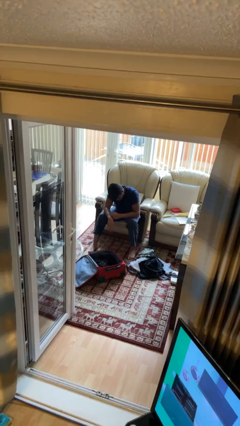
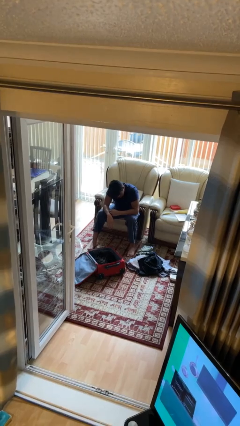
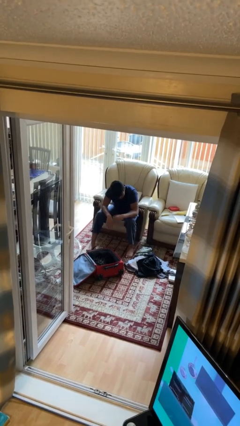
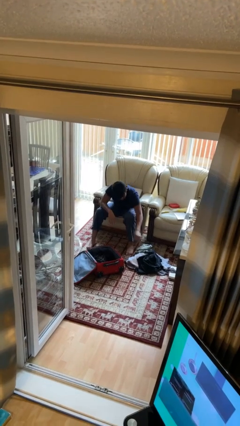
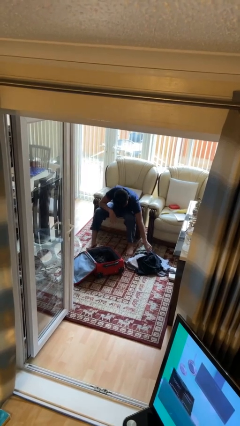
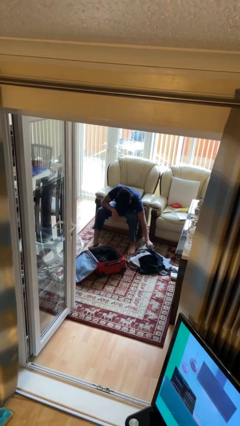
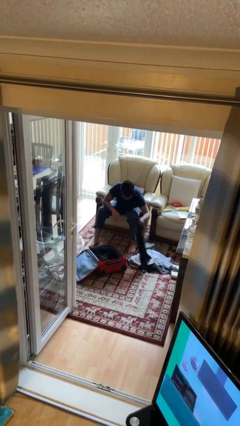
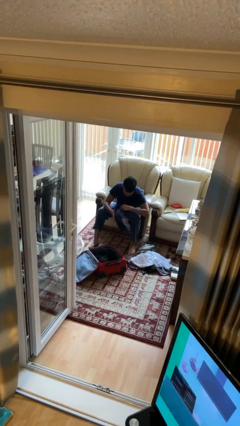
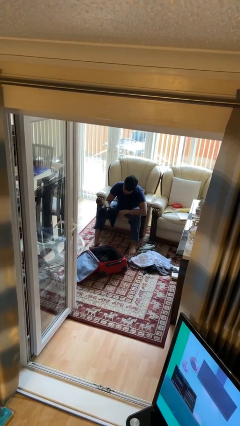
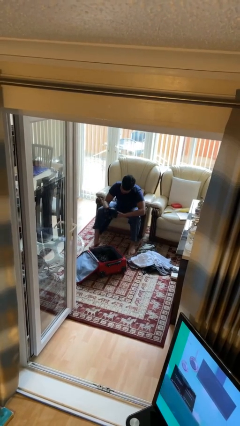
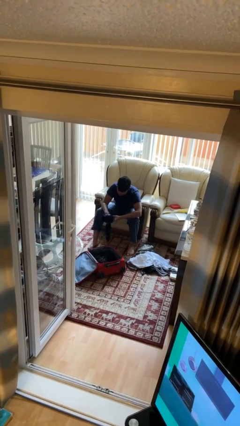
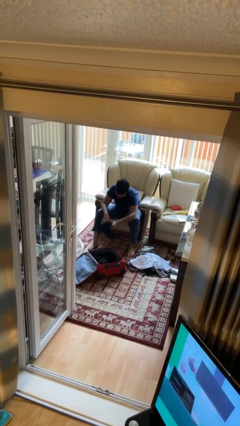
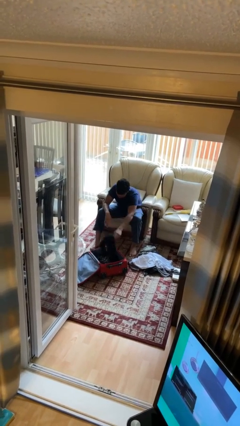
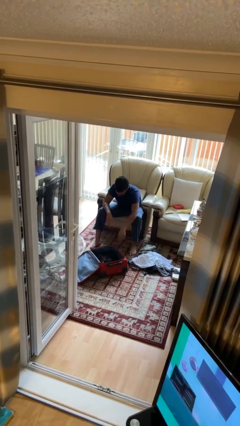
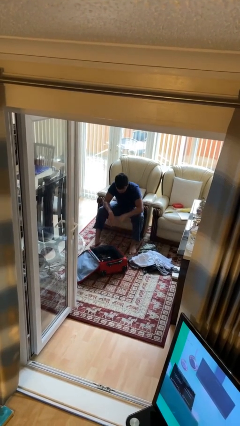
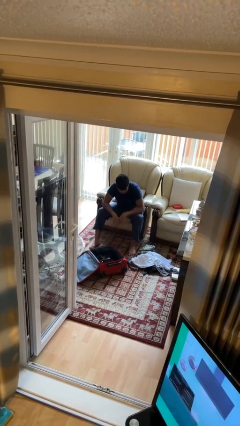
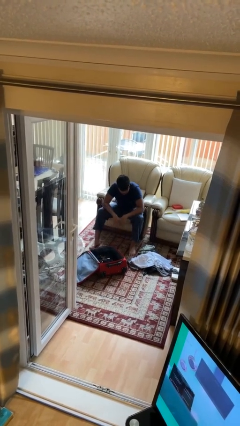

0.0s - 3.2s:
person loads clothes into suitcase

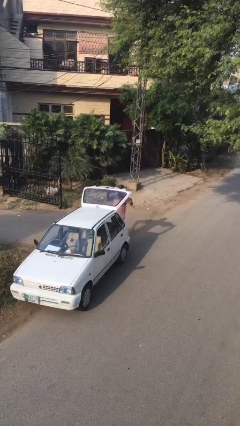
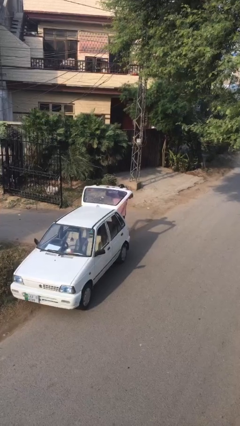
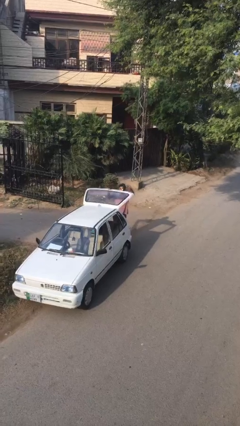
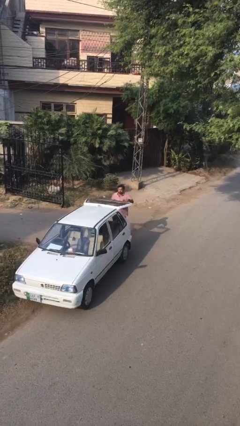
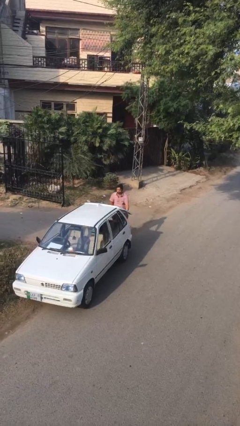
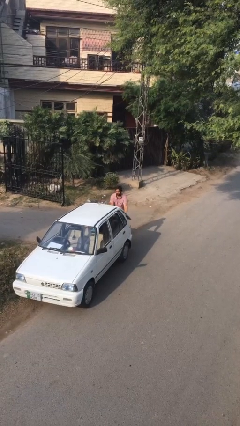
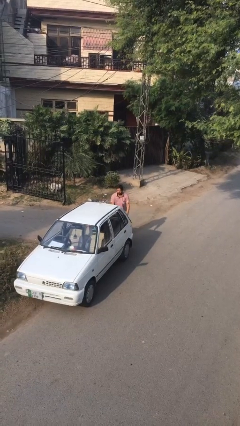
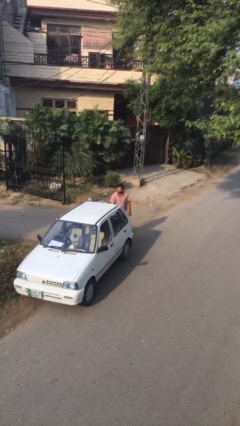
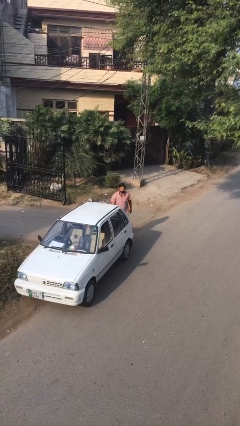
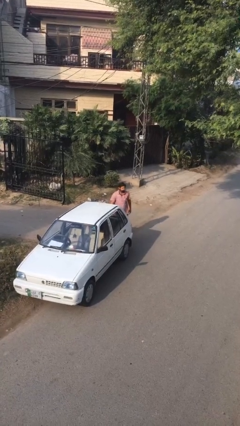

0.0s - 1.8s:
person closes car trunk

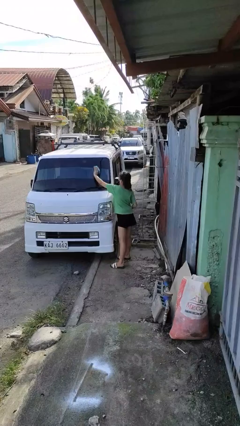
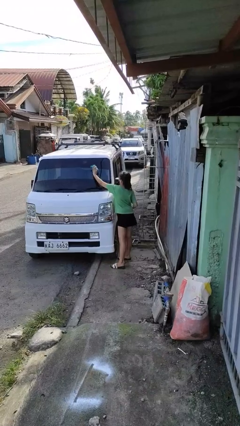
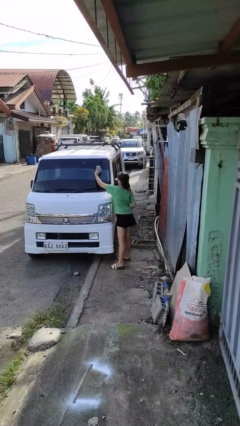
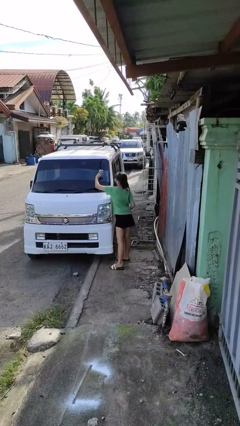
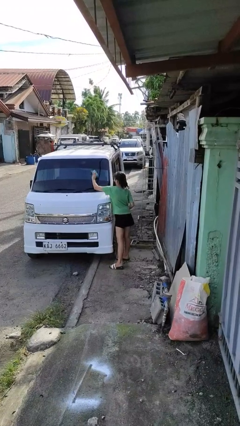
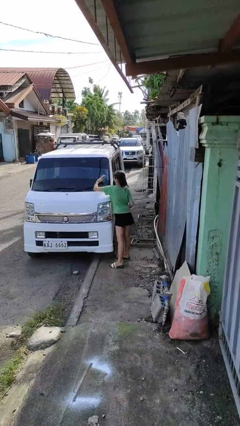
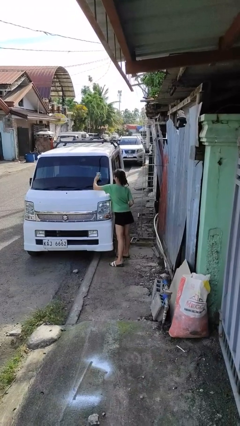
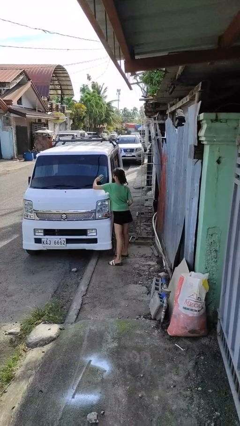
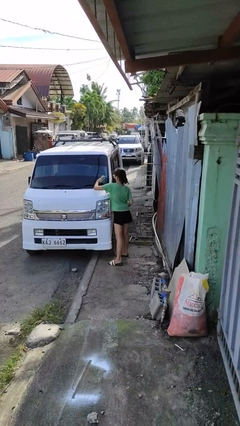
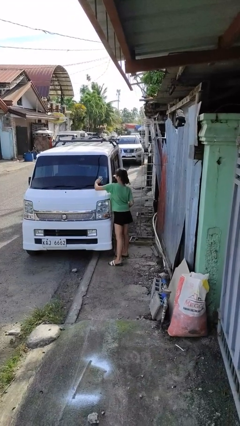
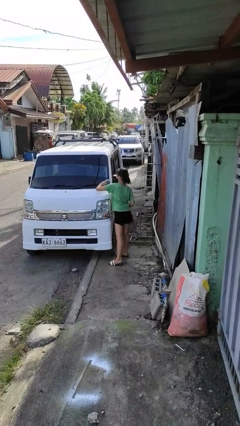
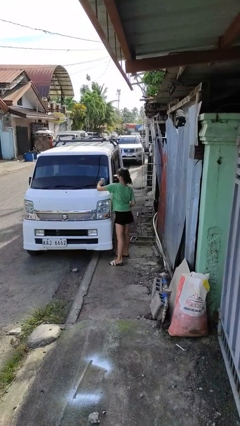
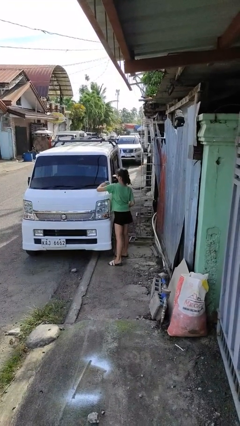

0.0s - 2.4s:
person polishes car with rag

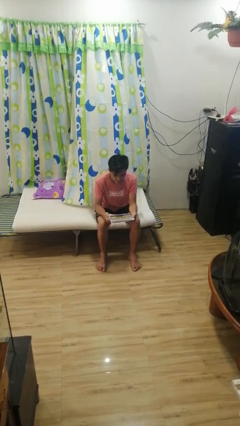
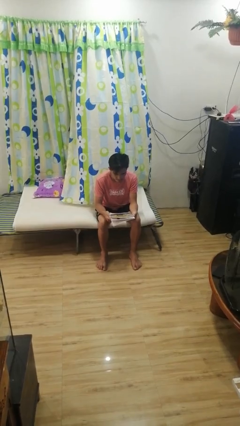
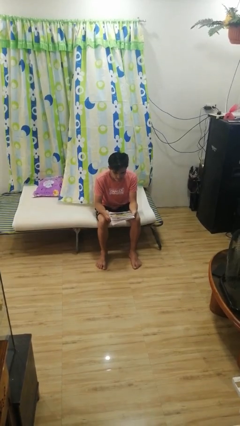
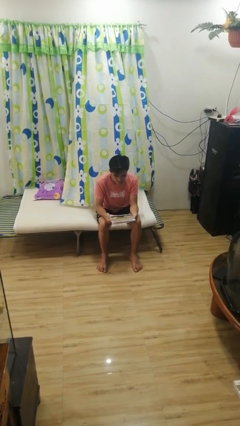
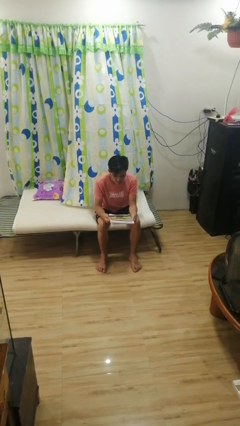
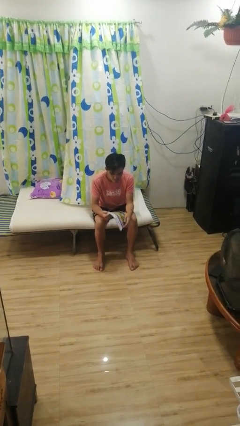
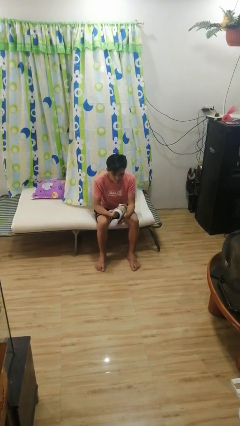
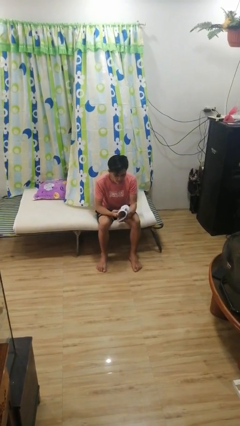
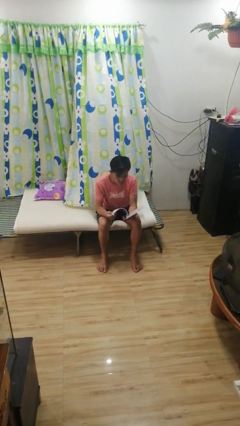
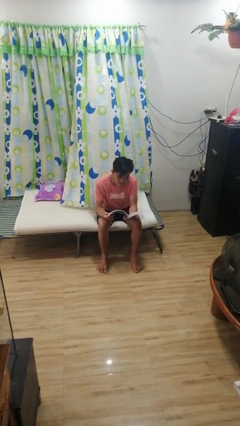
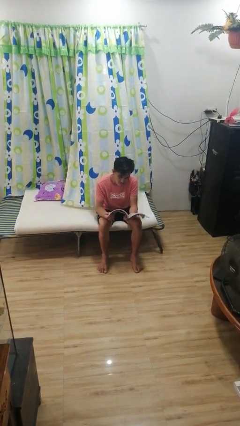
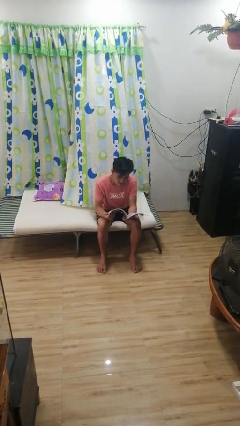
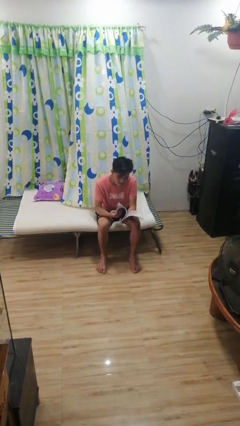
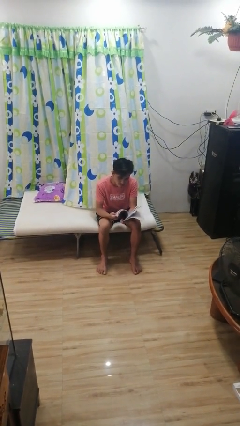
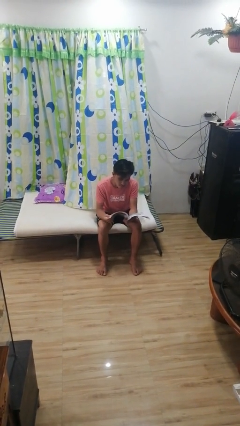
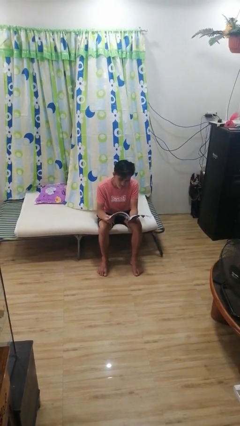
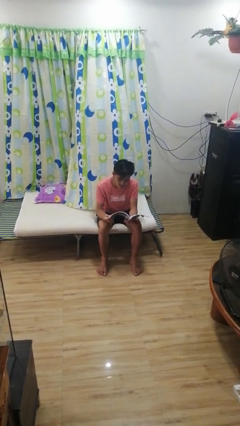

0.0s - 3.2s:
person reads magazine

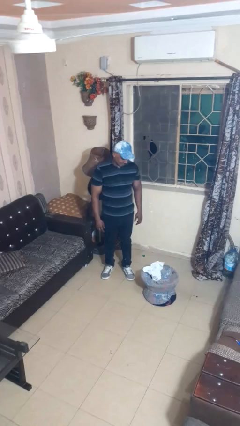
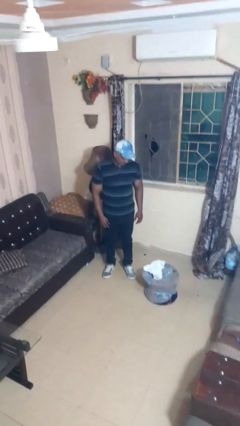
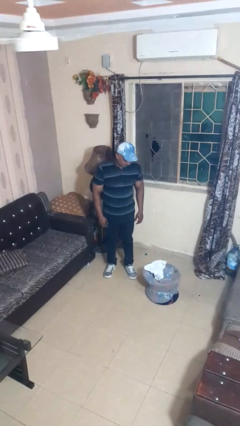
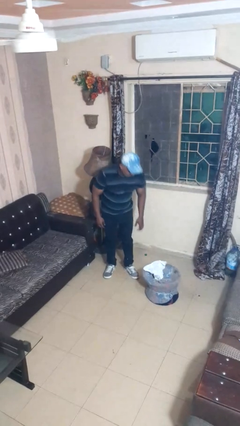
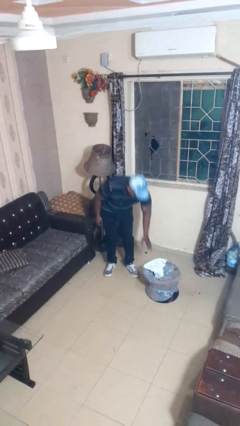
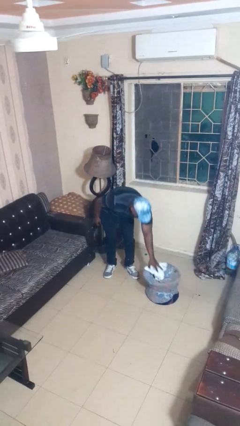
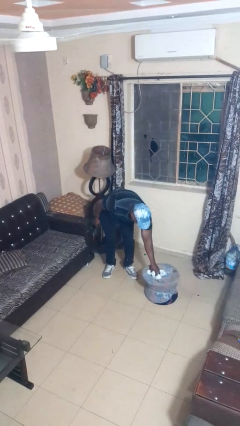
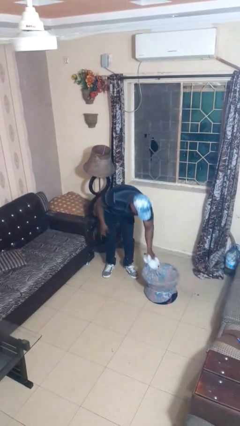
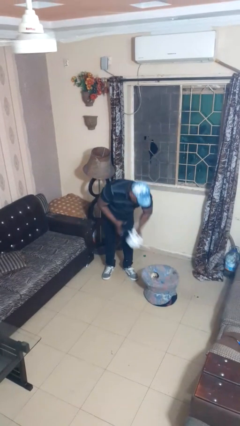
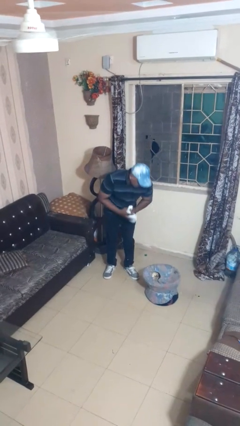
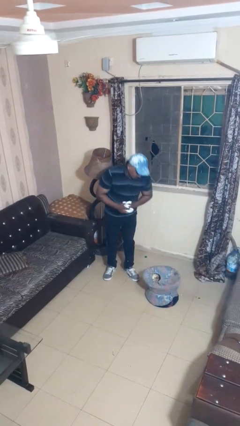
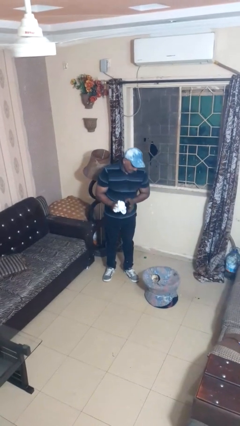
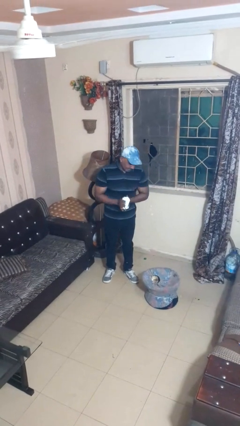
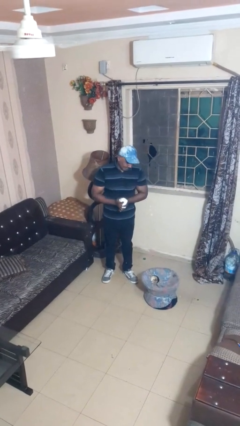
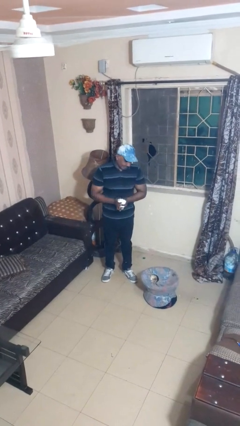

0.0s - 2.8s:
person takes object from basket

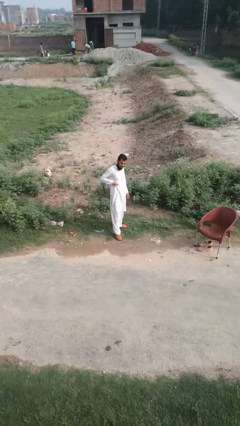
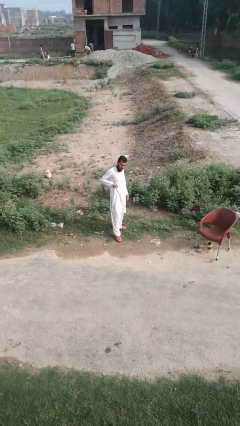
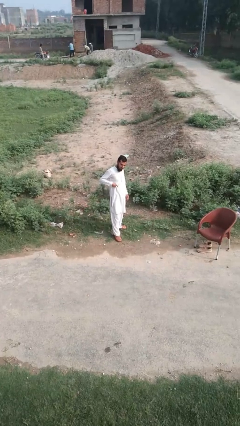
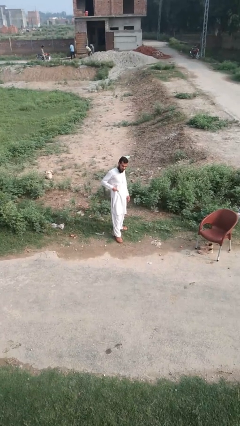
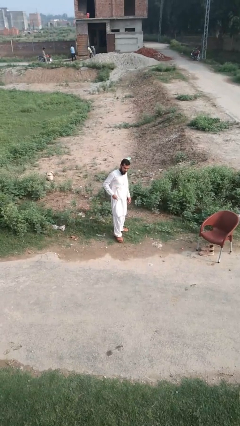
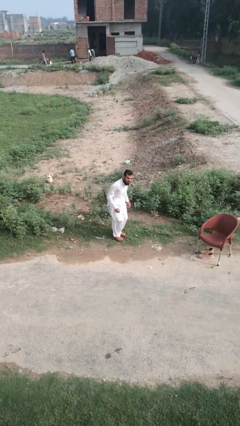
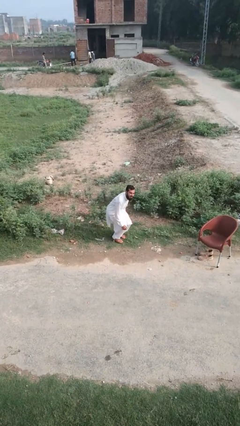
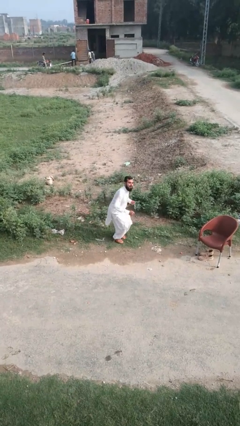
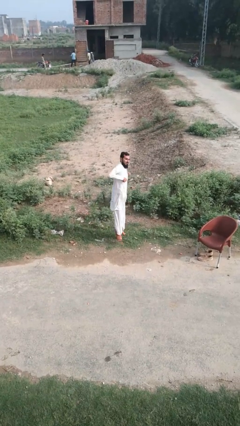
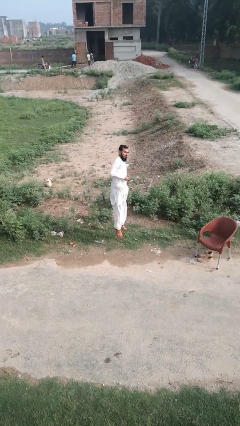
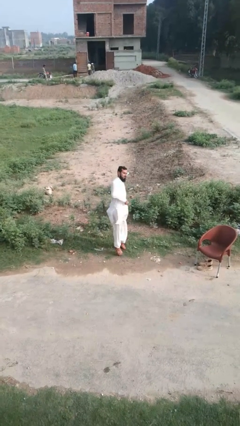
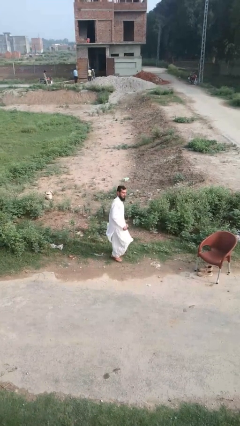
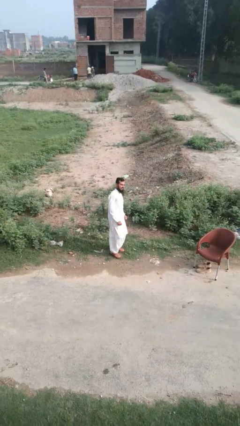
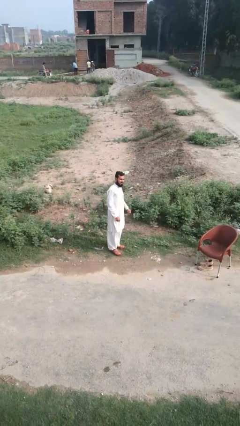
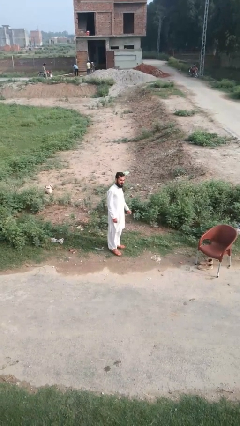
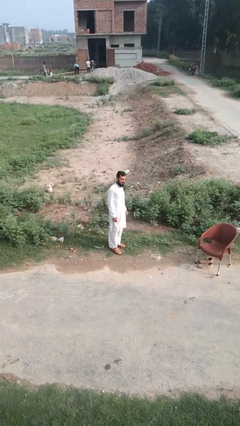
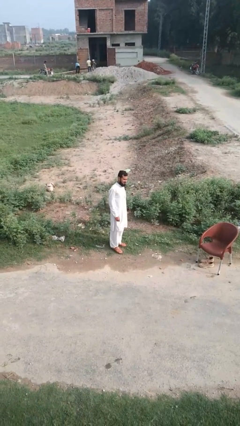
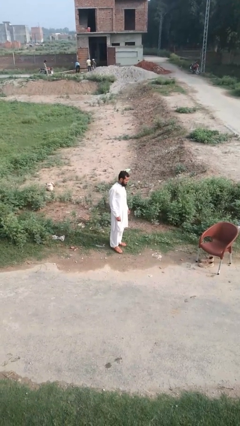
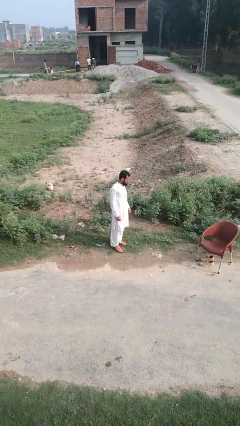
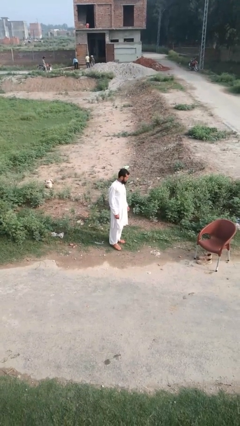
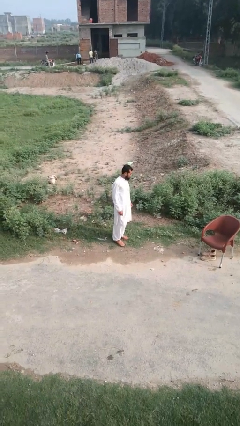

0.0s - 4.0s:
person jumps
